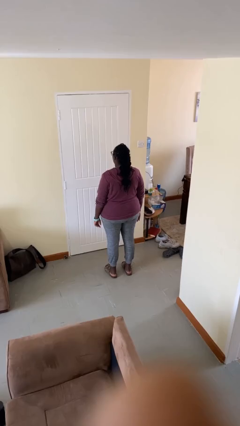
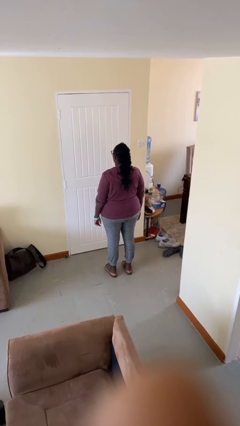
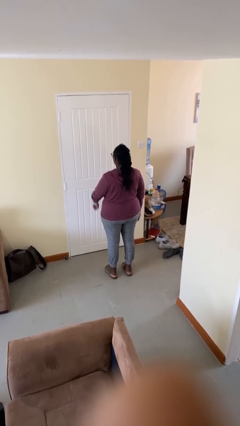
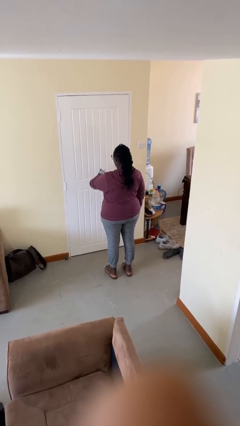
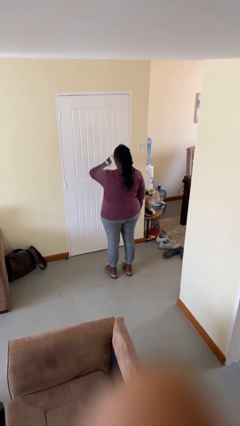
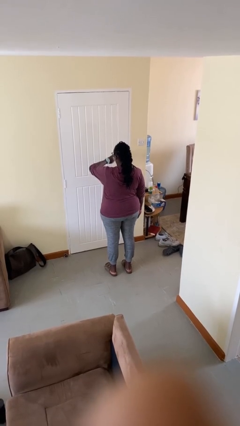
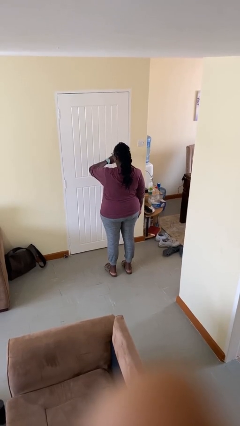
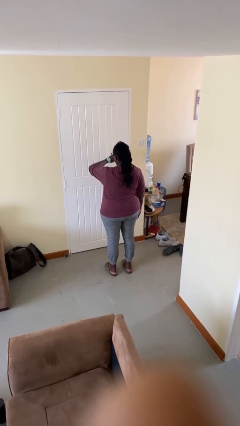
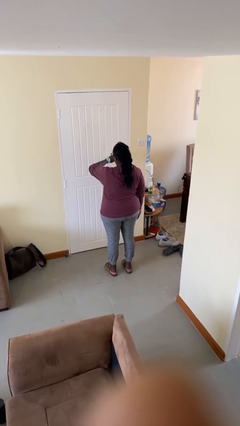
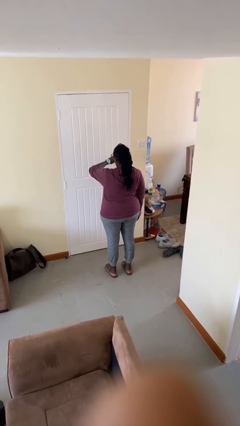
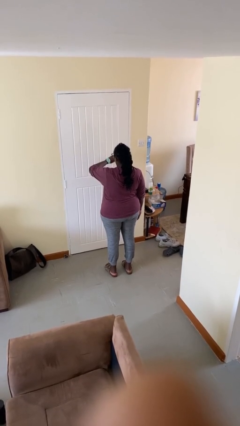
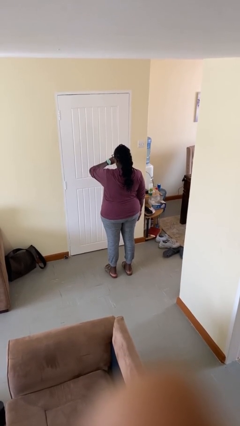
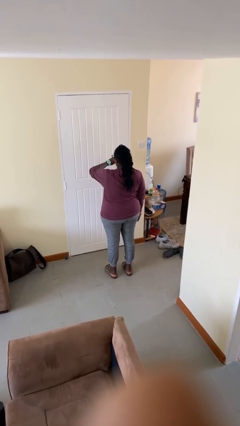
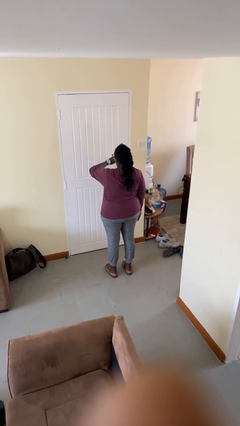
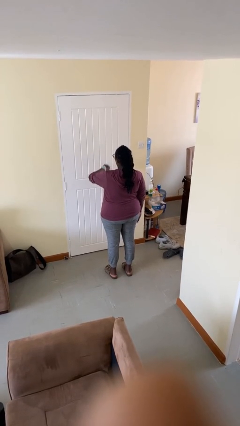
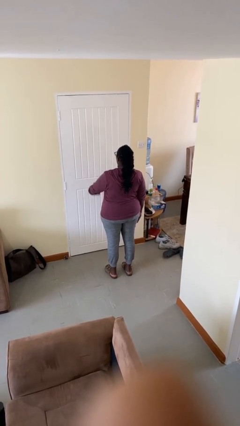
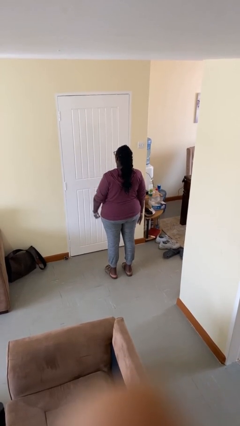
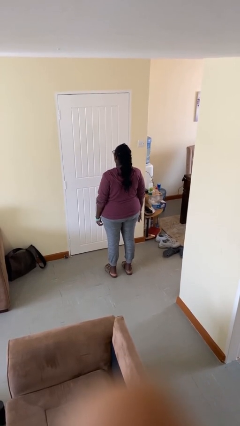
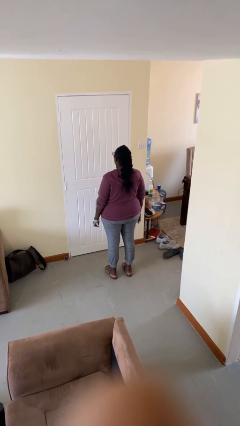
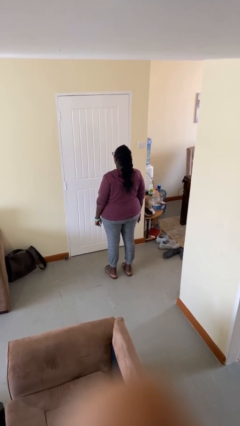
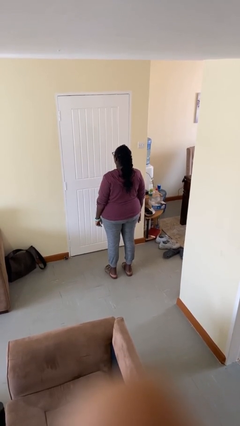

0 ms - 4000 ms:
person looks at wristwatch

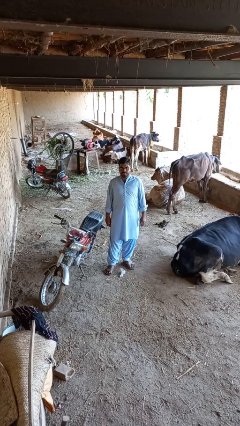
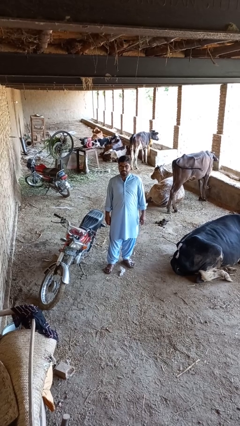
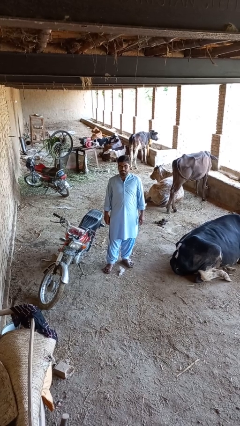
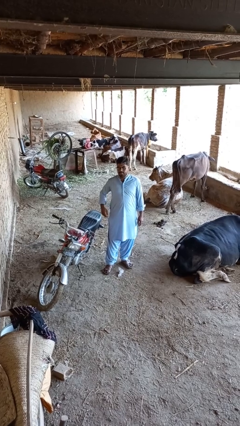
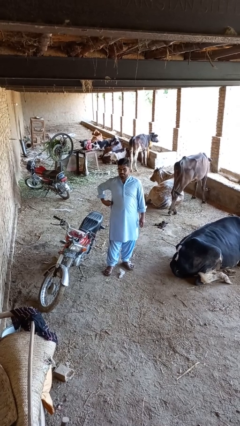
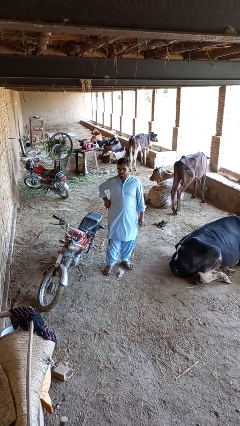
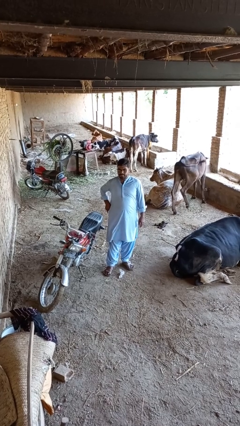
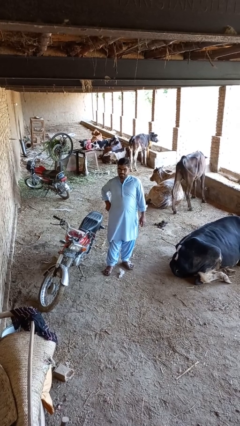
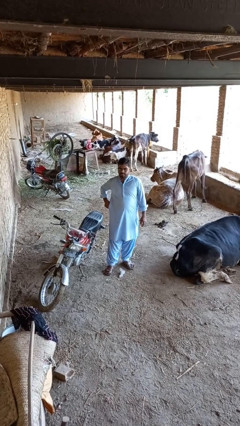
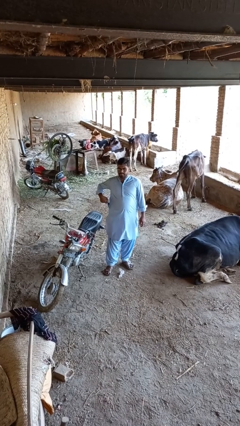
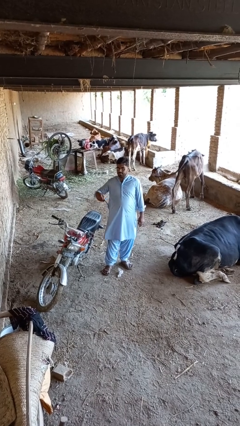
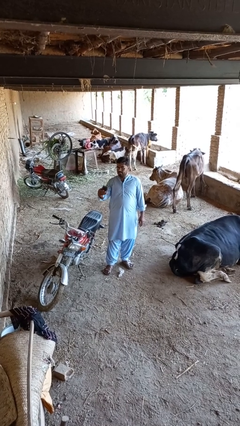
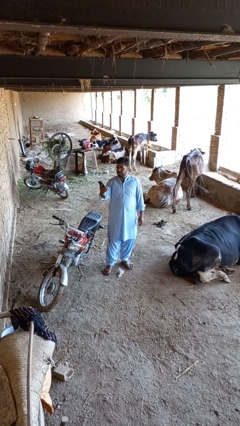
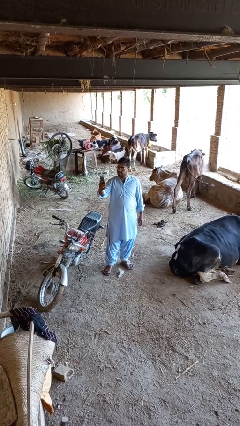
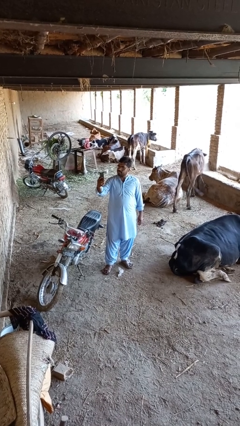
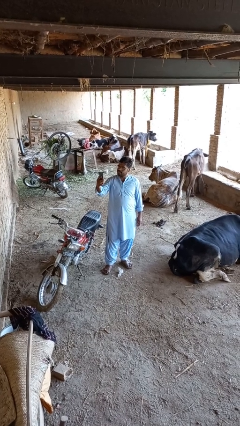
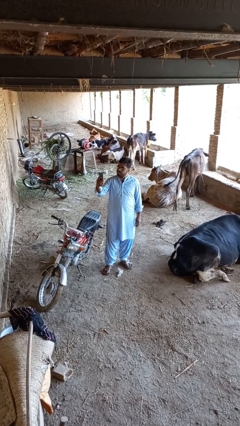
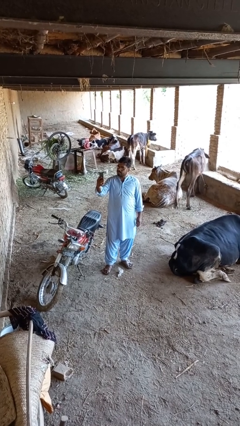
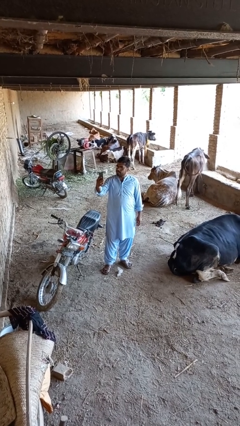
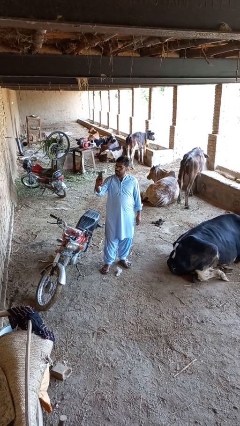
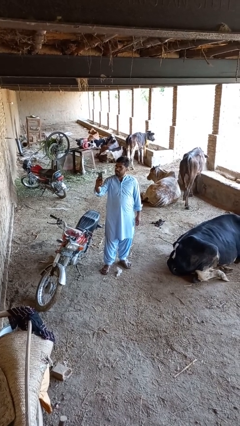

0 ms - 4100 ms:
person takes phone from pocket

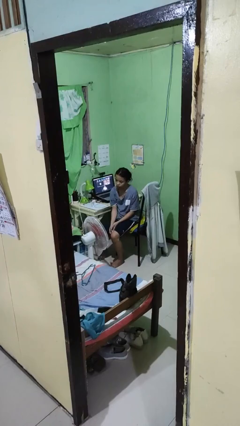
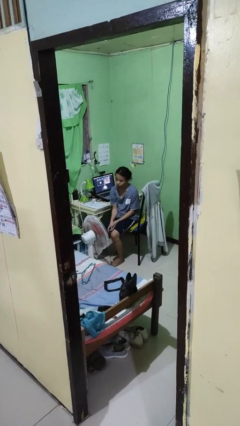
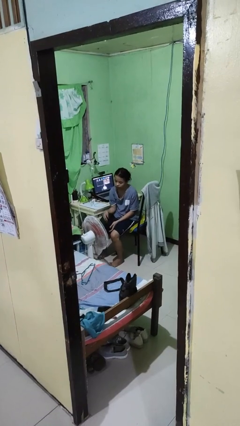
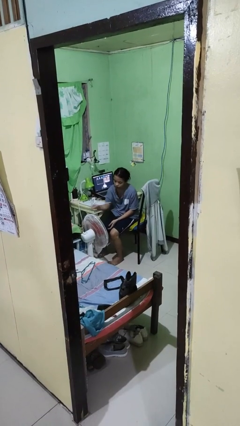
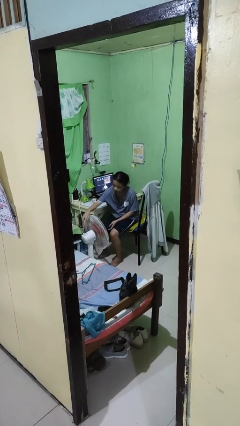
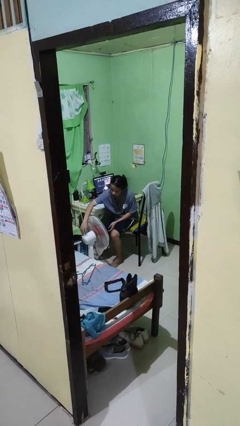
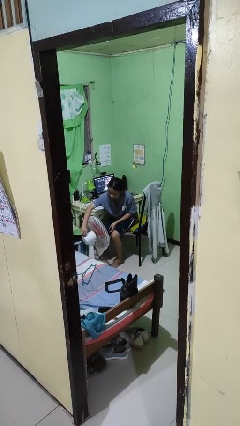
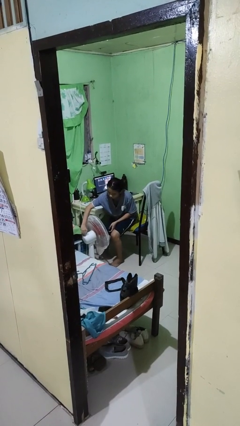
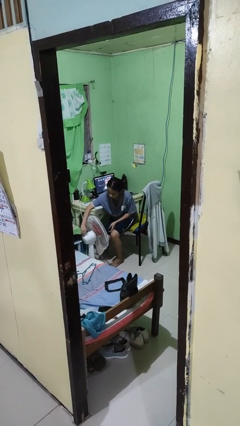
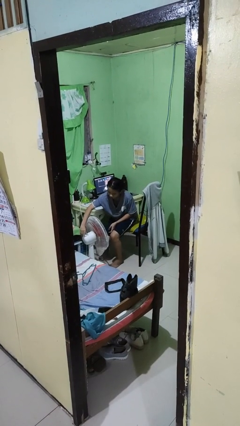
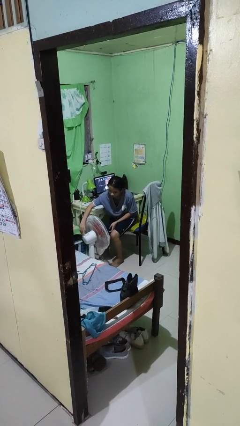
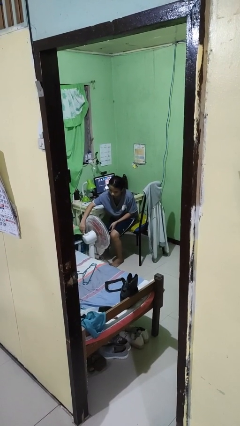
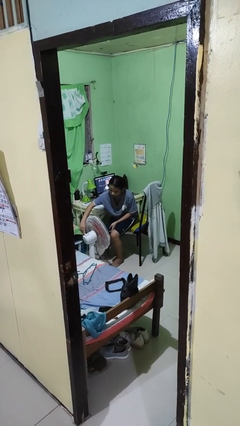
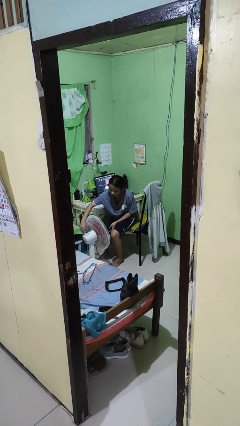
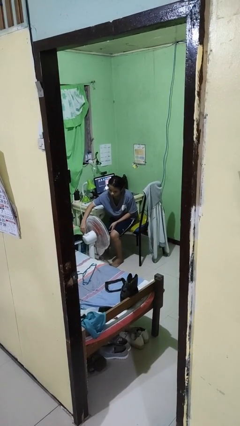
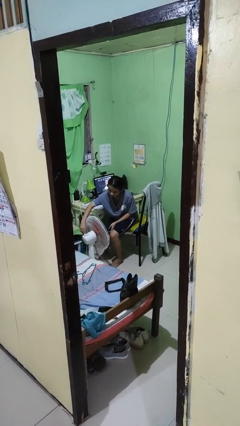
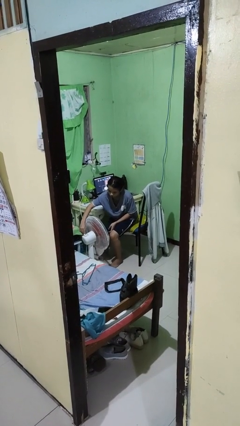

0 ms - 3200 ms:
person turns on fan

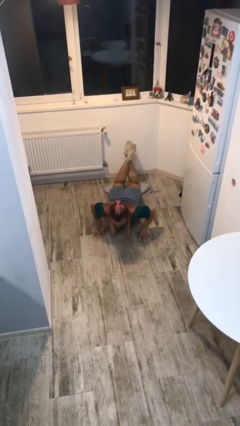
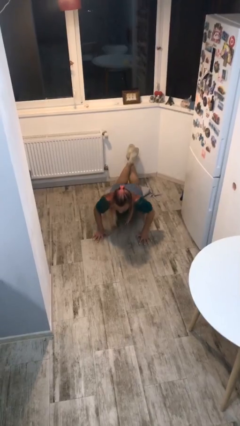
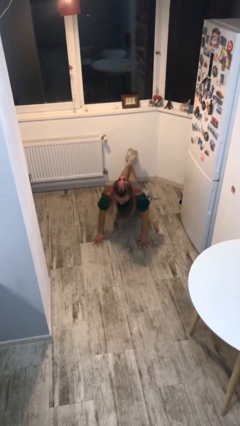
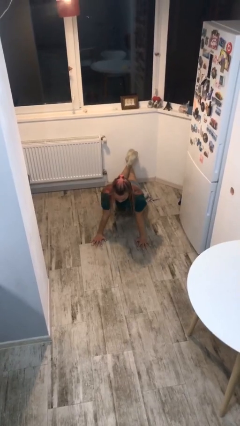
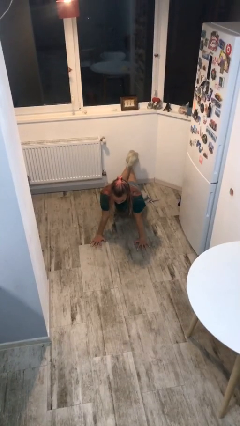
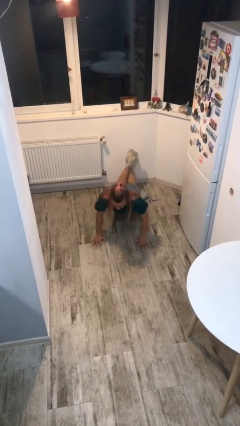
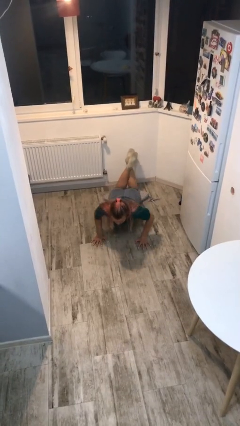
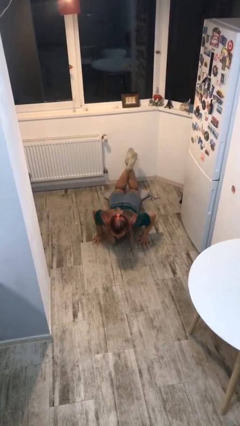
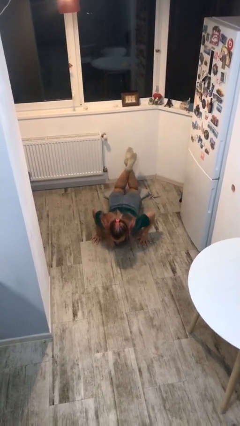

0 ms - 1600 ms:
person exercises with pushup

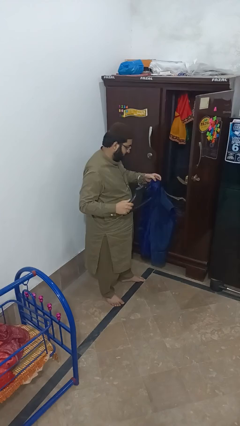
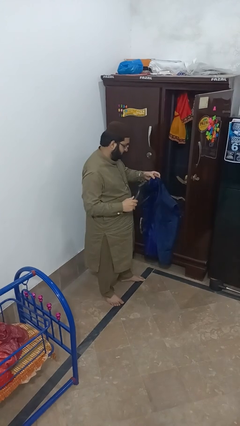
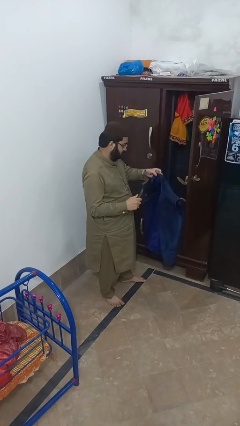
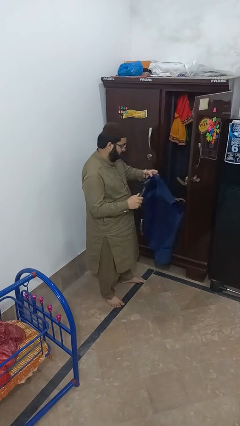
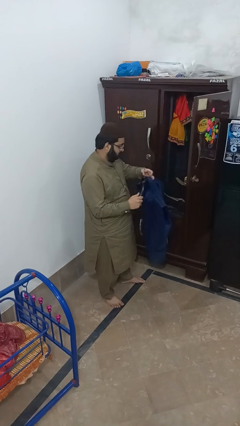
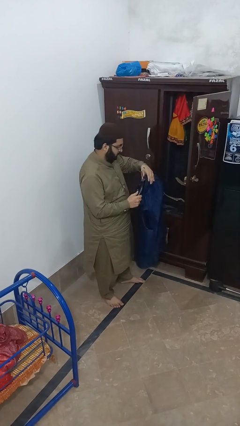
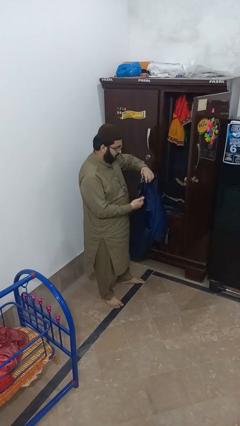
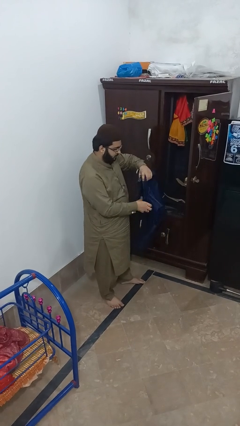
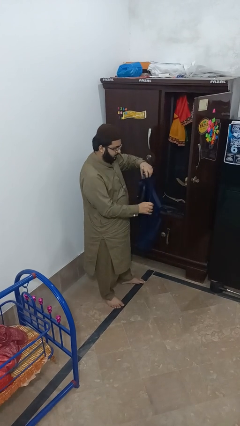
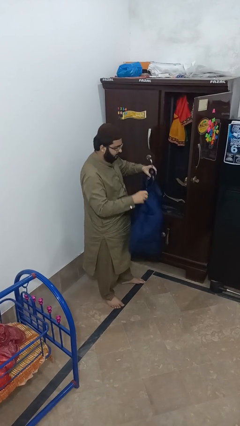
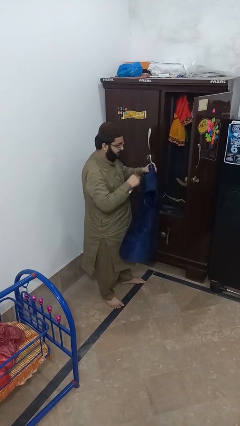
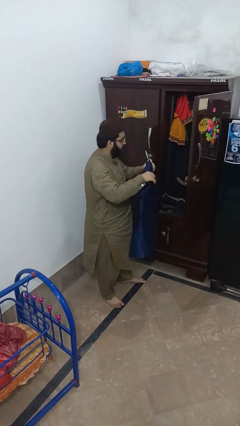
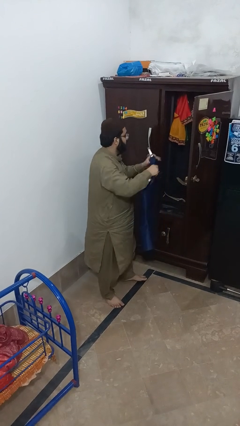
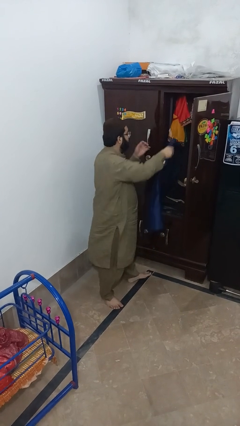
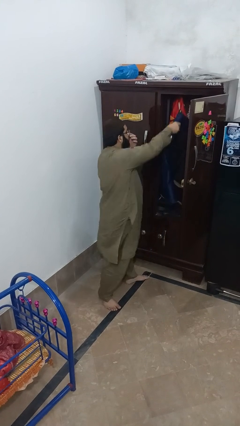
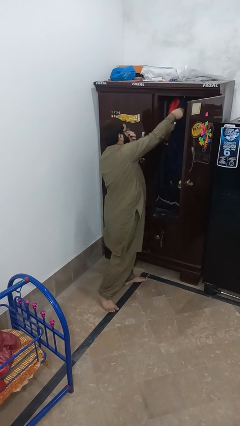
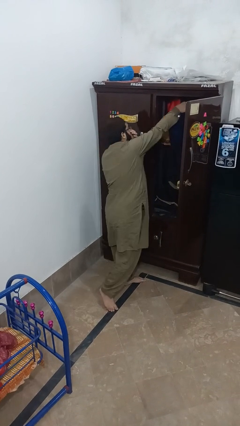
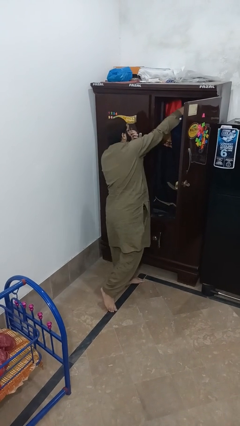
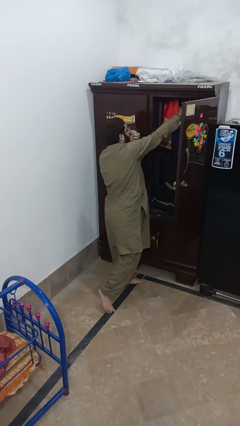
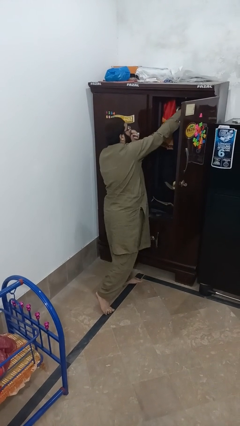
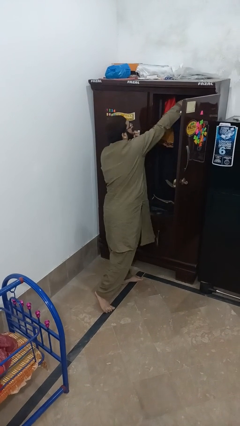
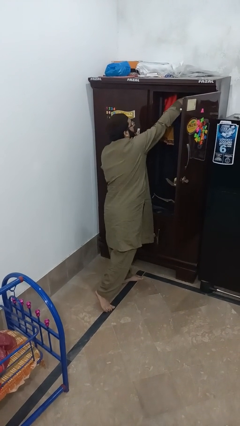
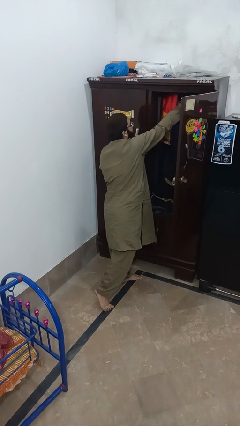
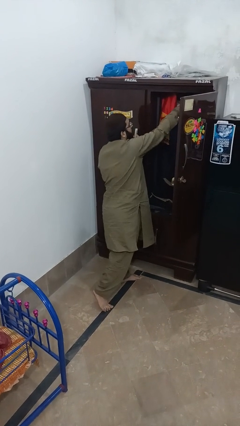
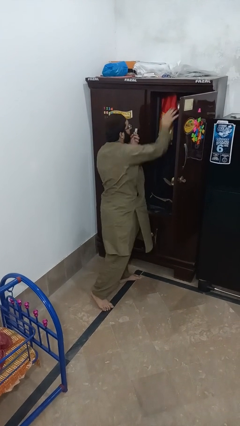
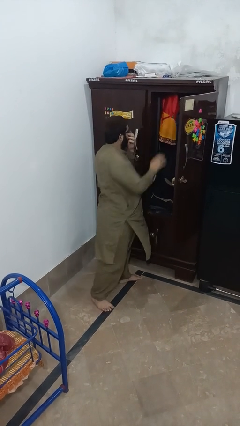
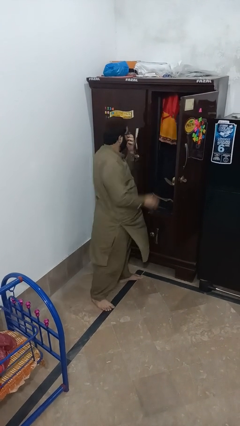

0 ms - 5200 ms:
person puts clothes into closet

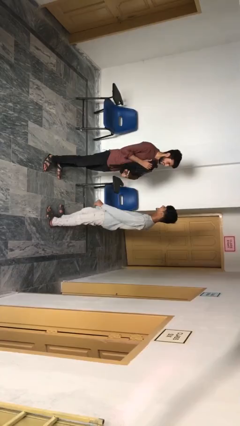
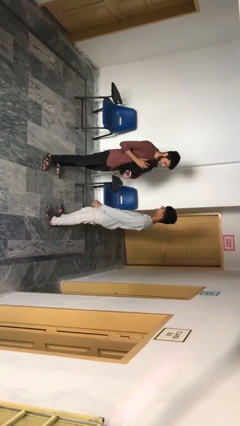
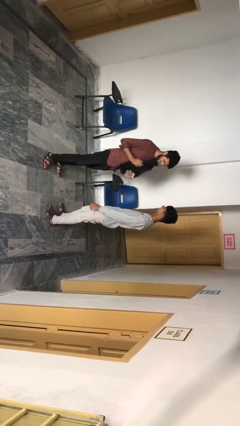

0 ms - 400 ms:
person transfers object to person
